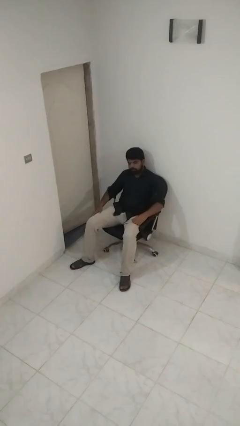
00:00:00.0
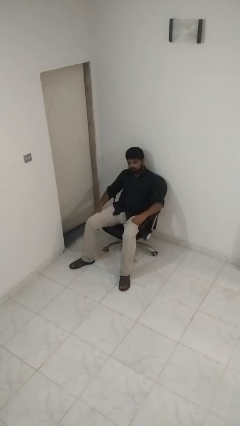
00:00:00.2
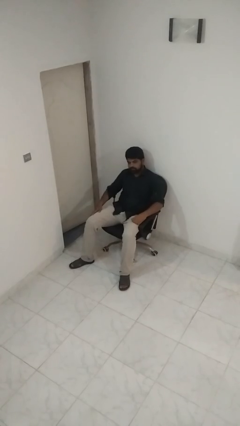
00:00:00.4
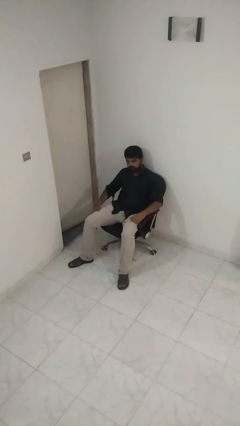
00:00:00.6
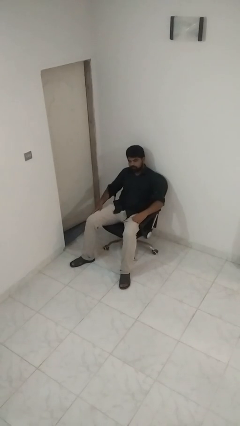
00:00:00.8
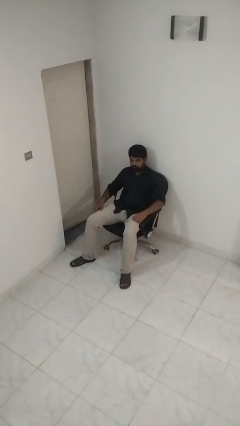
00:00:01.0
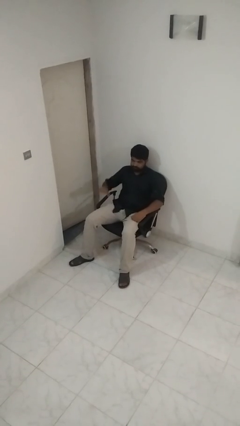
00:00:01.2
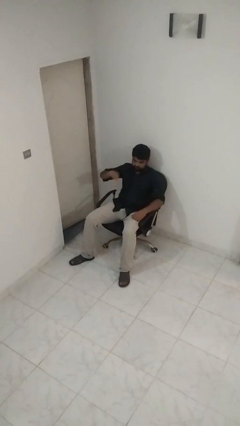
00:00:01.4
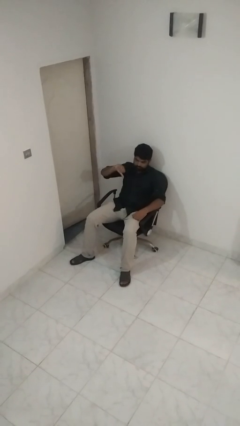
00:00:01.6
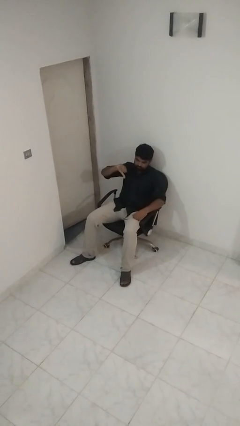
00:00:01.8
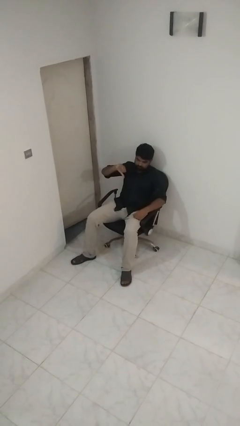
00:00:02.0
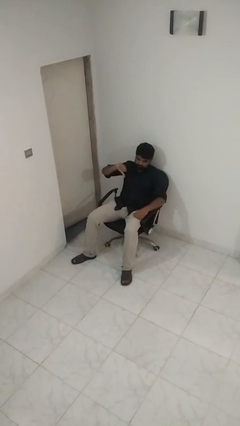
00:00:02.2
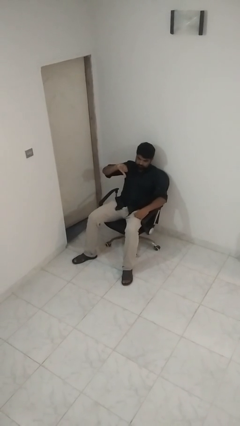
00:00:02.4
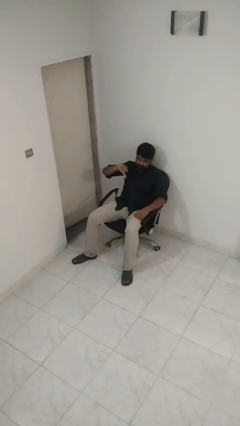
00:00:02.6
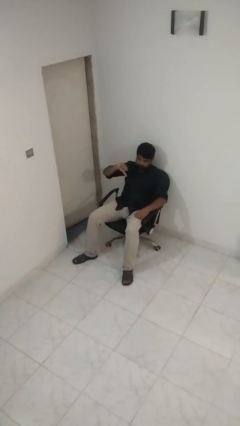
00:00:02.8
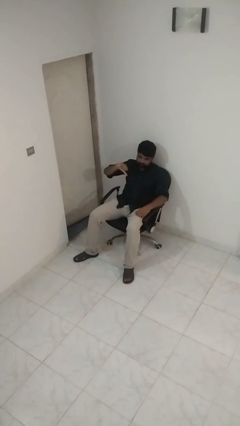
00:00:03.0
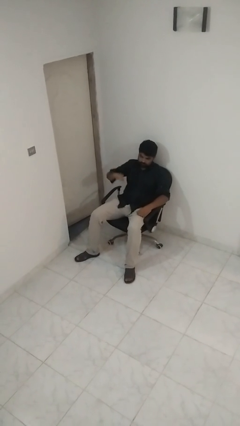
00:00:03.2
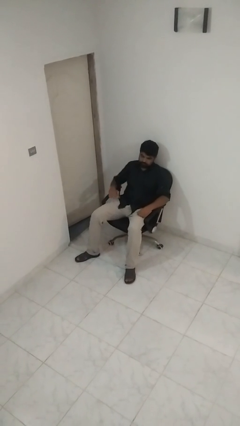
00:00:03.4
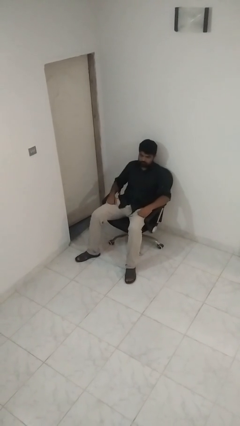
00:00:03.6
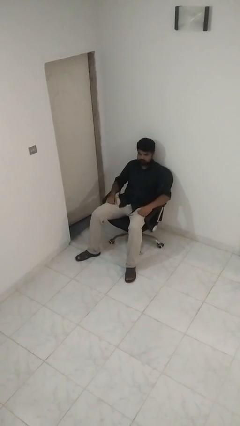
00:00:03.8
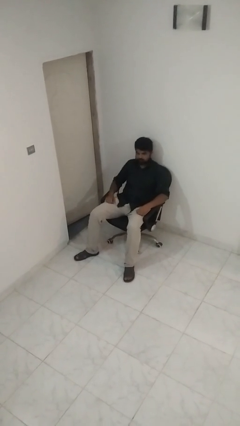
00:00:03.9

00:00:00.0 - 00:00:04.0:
person gestures thumbs down

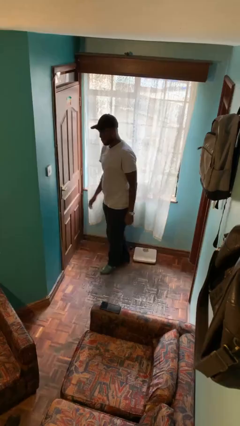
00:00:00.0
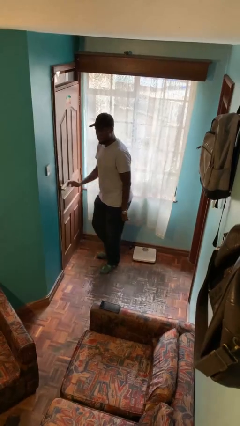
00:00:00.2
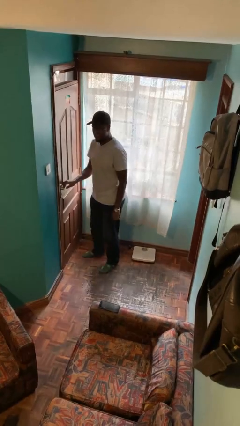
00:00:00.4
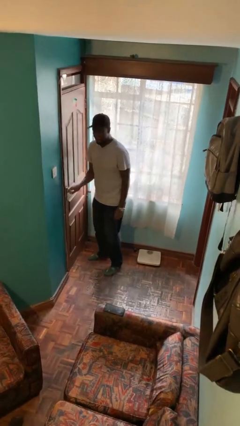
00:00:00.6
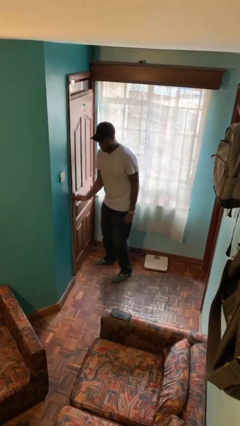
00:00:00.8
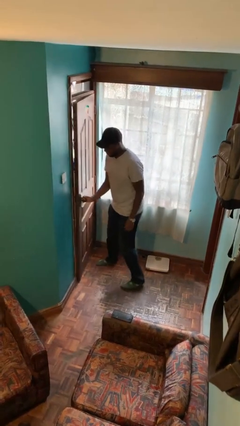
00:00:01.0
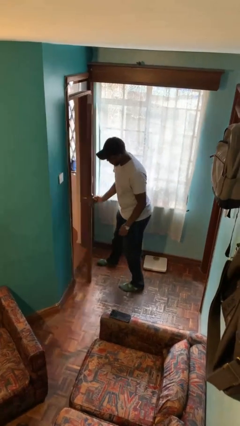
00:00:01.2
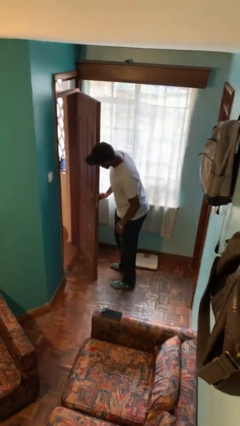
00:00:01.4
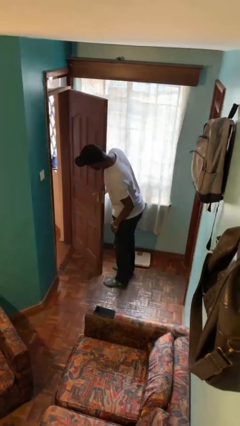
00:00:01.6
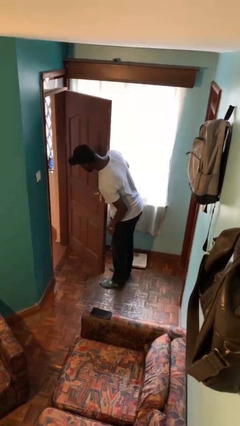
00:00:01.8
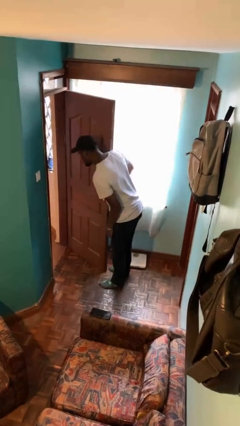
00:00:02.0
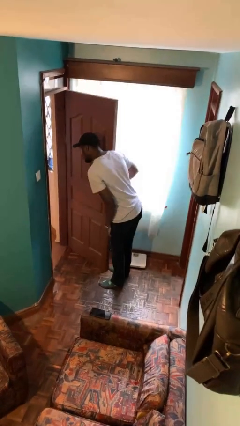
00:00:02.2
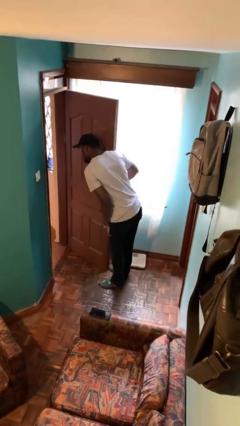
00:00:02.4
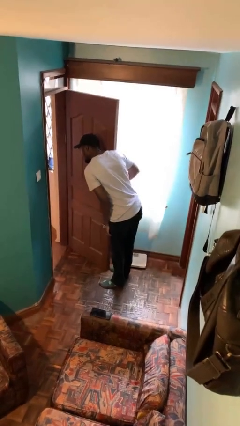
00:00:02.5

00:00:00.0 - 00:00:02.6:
person opens facility door

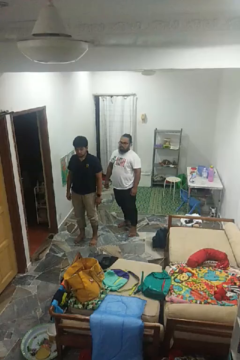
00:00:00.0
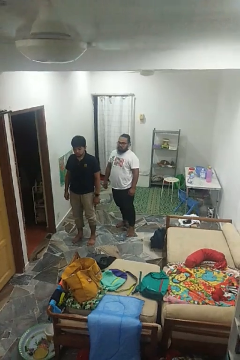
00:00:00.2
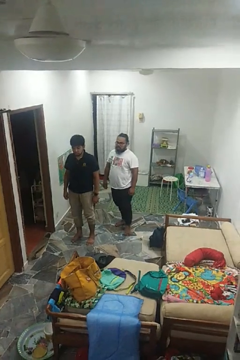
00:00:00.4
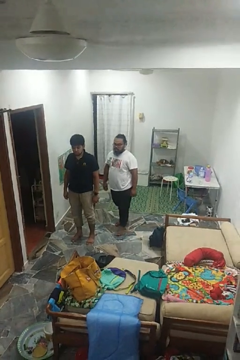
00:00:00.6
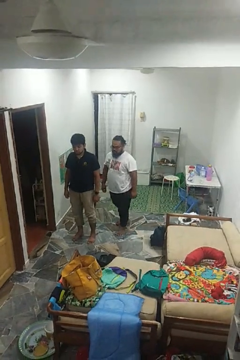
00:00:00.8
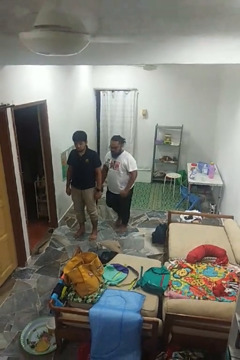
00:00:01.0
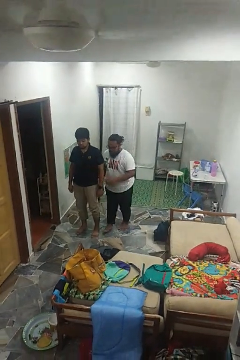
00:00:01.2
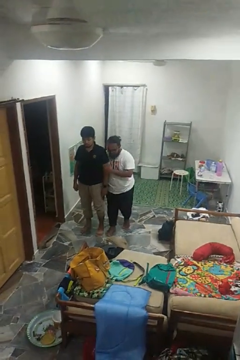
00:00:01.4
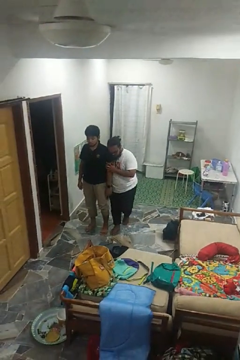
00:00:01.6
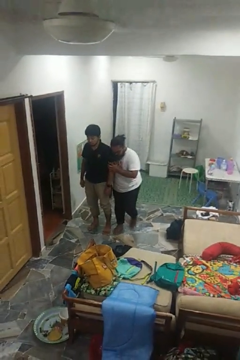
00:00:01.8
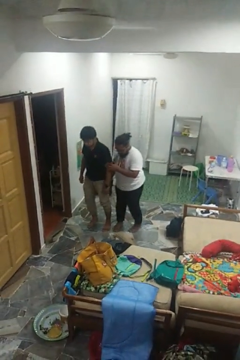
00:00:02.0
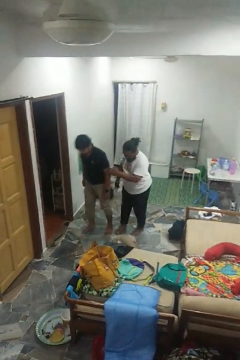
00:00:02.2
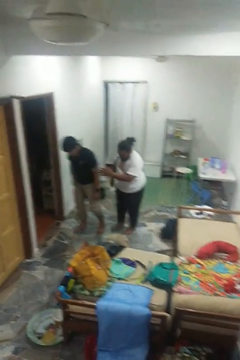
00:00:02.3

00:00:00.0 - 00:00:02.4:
person bumps into person

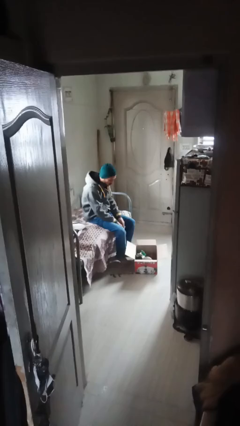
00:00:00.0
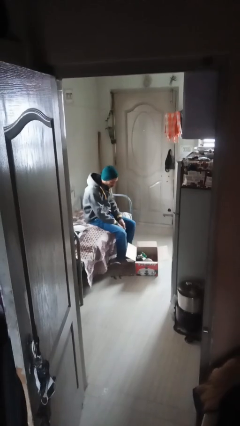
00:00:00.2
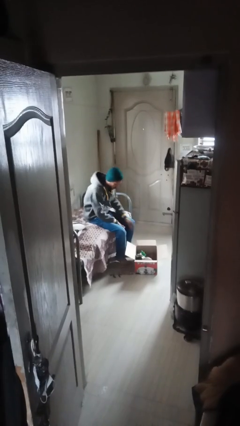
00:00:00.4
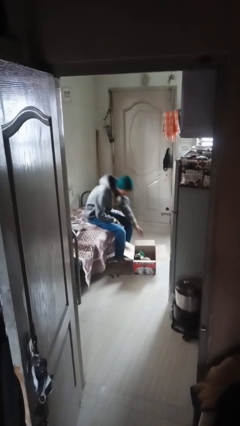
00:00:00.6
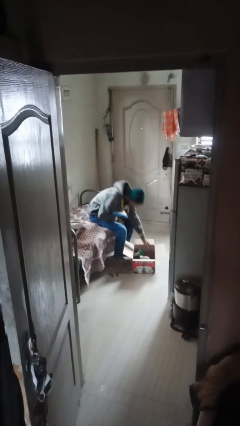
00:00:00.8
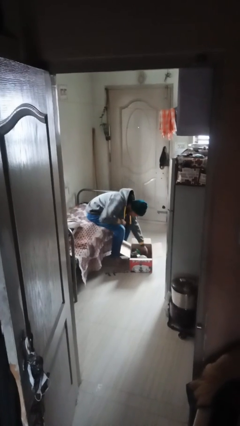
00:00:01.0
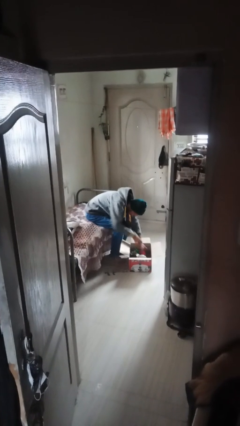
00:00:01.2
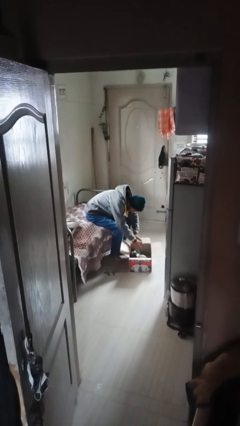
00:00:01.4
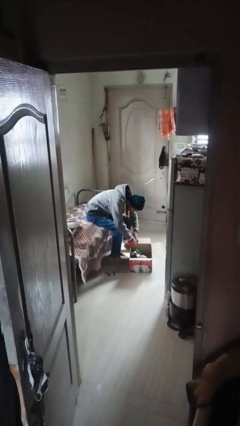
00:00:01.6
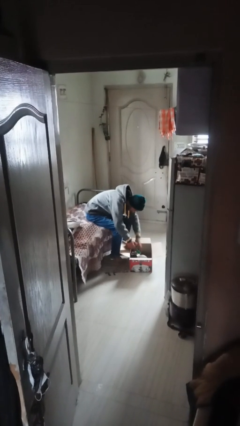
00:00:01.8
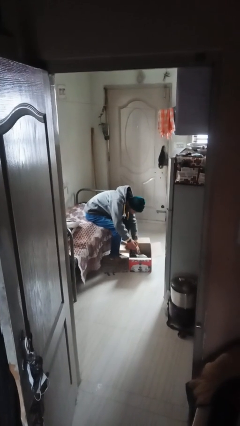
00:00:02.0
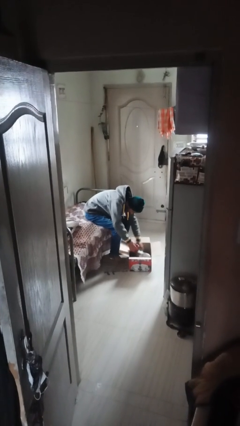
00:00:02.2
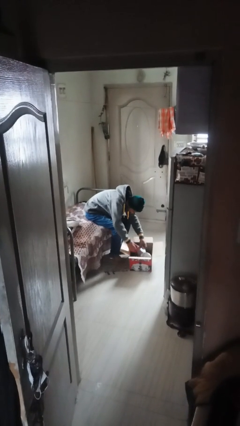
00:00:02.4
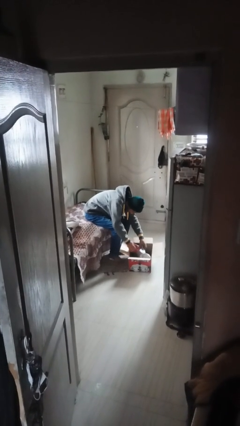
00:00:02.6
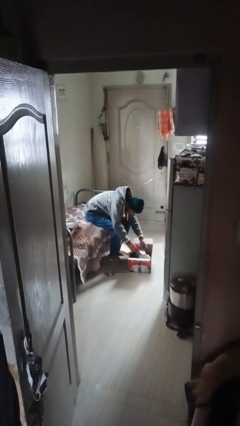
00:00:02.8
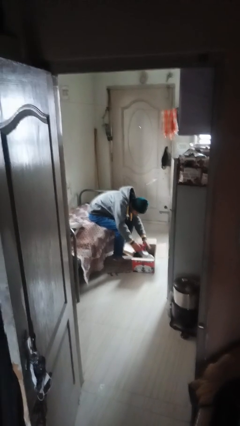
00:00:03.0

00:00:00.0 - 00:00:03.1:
person searches in box

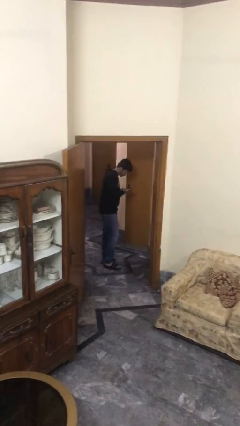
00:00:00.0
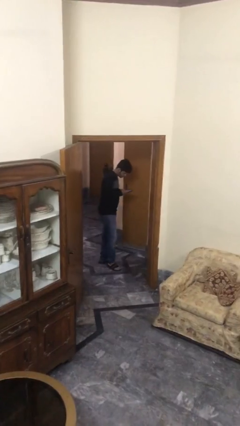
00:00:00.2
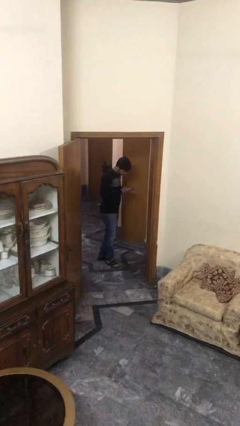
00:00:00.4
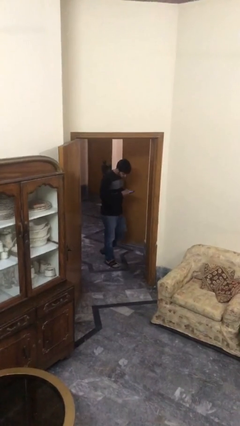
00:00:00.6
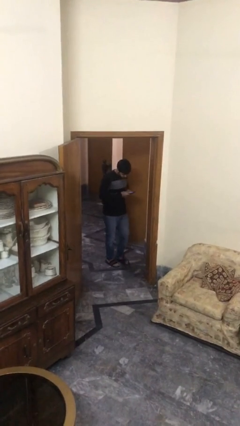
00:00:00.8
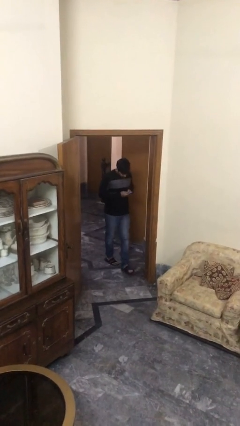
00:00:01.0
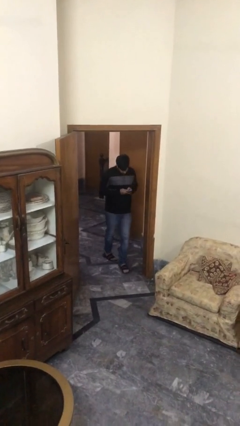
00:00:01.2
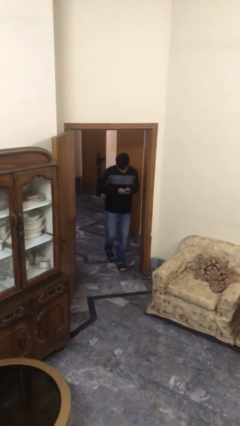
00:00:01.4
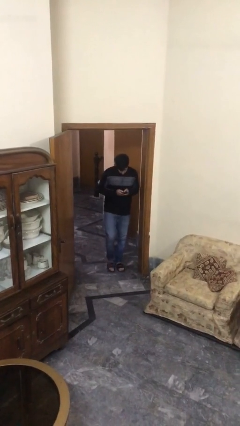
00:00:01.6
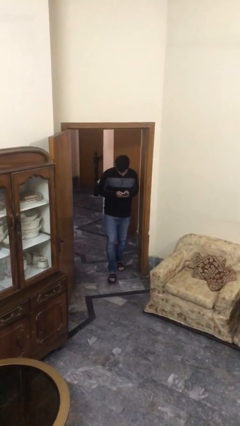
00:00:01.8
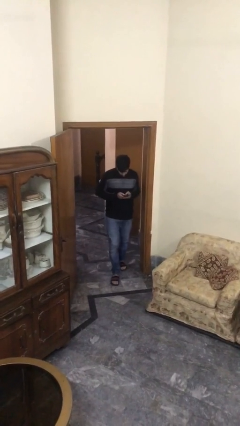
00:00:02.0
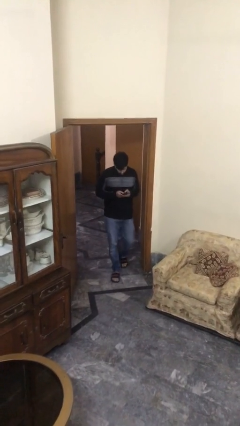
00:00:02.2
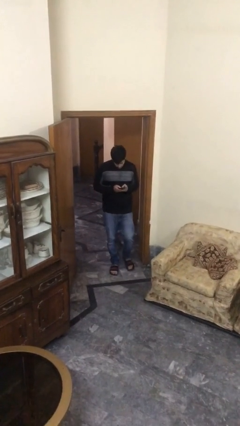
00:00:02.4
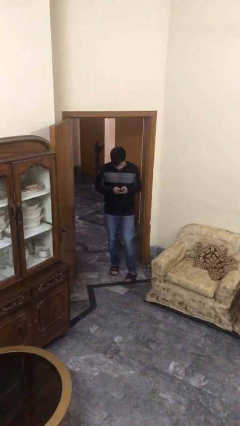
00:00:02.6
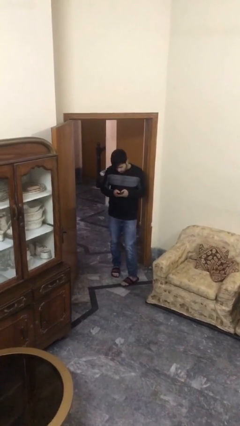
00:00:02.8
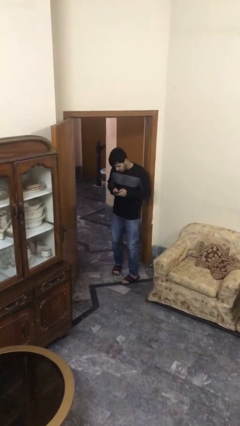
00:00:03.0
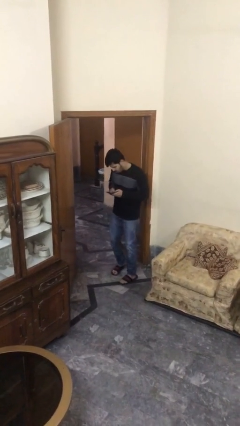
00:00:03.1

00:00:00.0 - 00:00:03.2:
person enters scene through structure

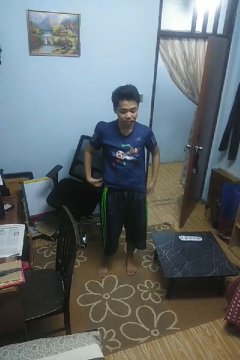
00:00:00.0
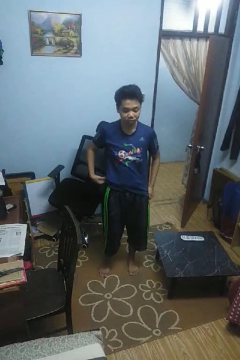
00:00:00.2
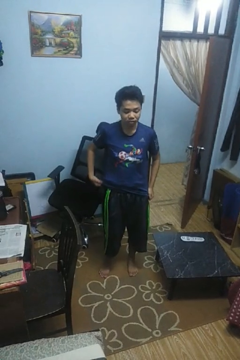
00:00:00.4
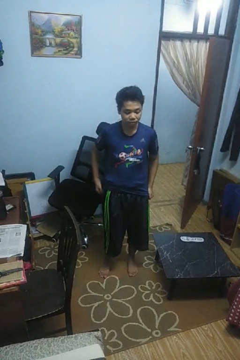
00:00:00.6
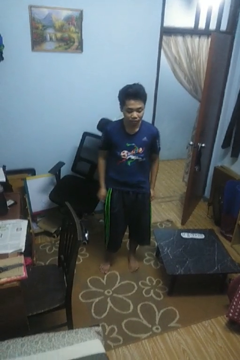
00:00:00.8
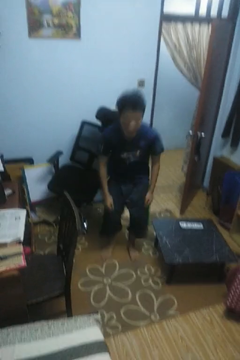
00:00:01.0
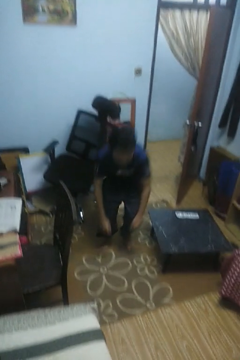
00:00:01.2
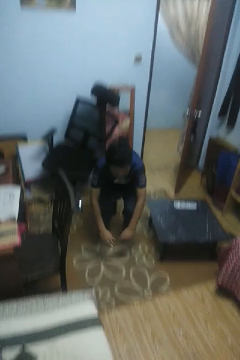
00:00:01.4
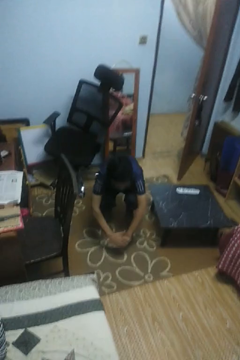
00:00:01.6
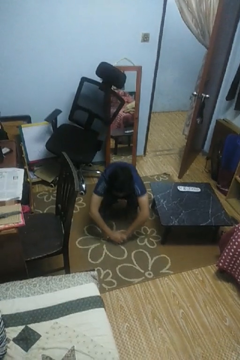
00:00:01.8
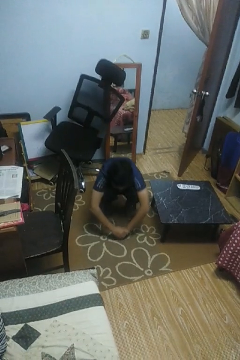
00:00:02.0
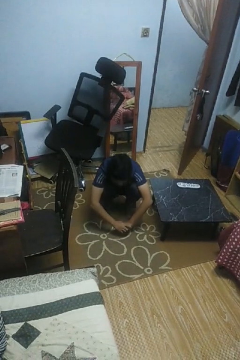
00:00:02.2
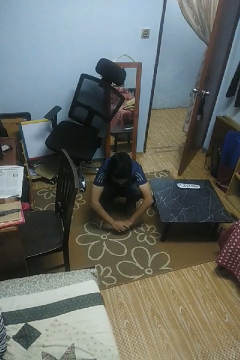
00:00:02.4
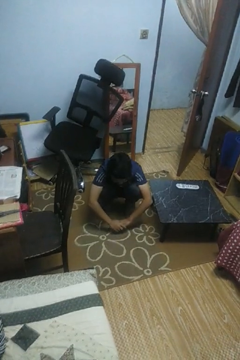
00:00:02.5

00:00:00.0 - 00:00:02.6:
person squats

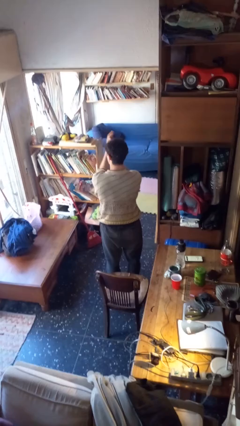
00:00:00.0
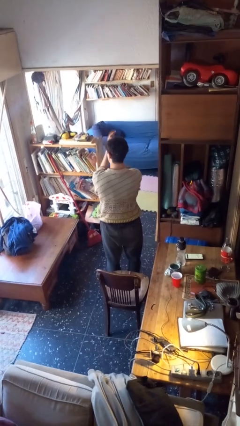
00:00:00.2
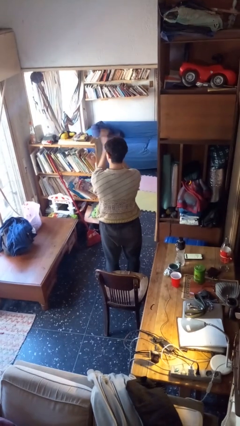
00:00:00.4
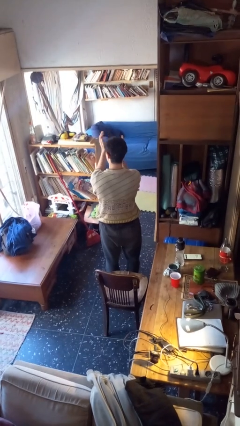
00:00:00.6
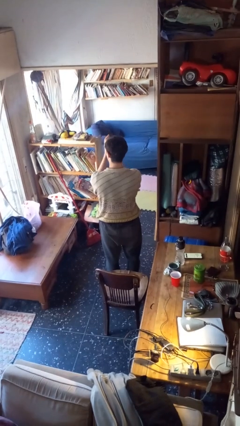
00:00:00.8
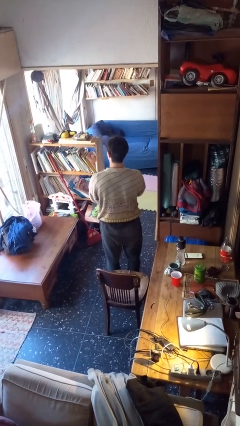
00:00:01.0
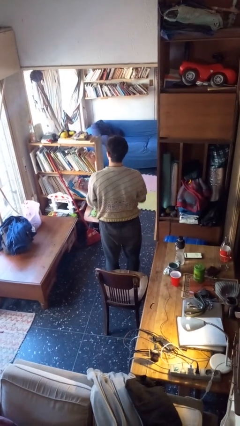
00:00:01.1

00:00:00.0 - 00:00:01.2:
person claps hands
